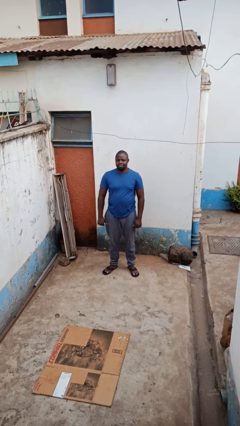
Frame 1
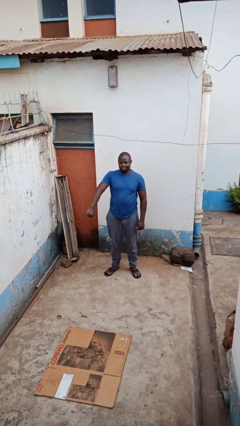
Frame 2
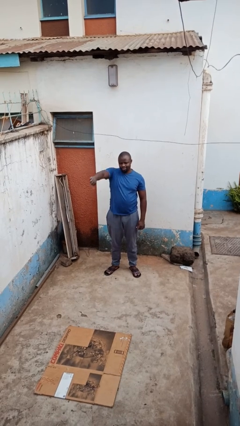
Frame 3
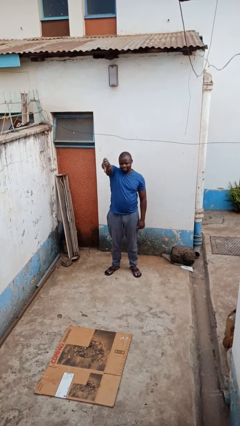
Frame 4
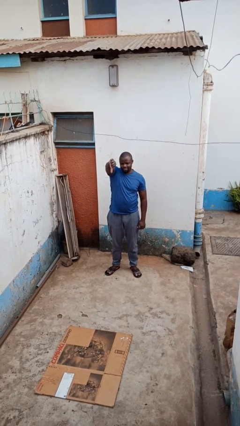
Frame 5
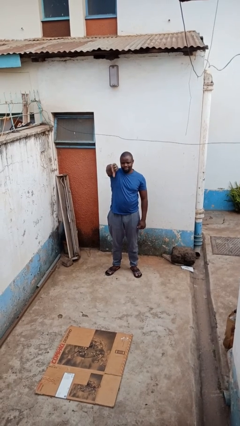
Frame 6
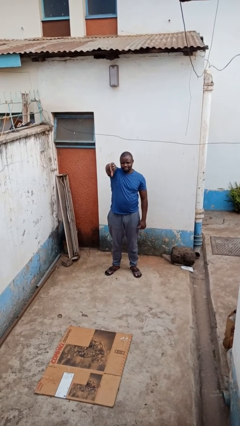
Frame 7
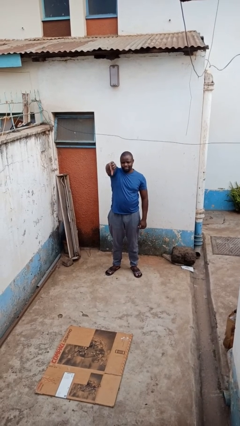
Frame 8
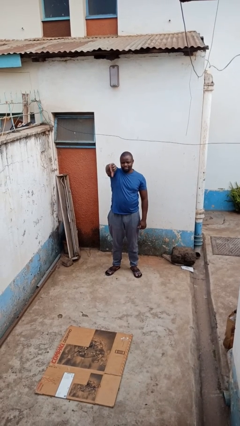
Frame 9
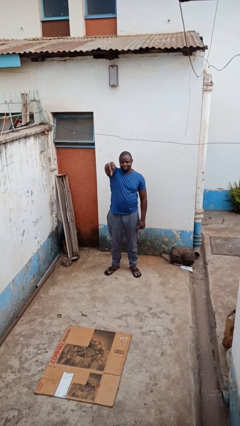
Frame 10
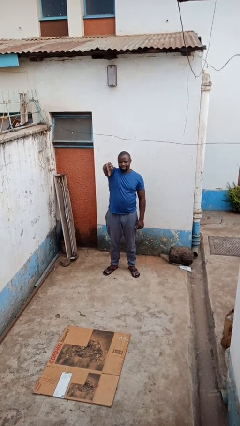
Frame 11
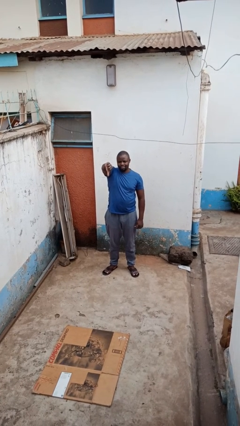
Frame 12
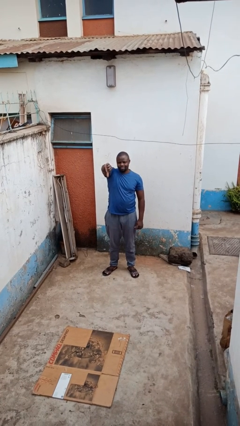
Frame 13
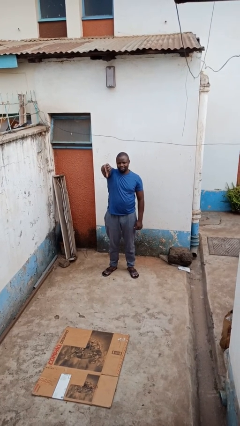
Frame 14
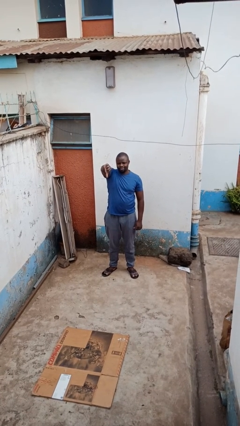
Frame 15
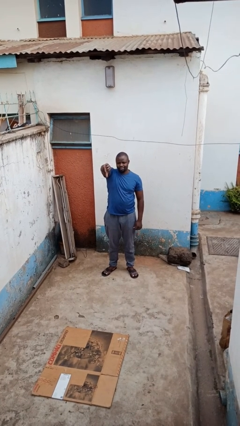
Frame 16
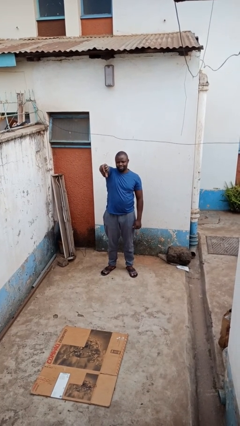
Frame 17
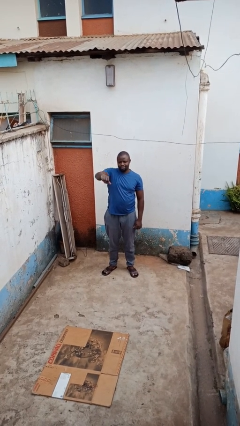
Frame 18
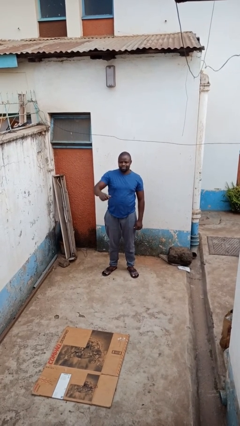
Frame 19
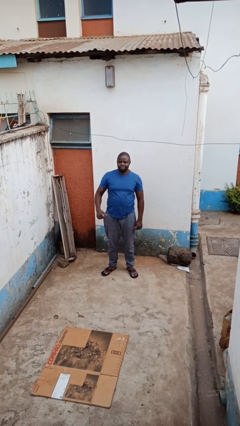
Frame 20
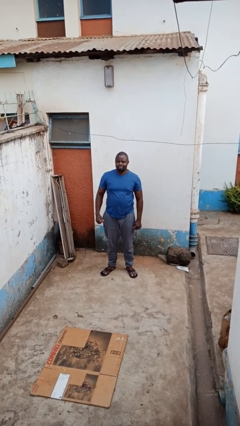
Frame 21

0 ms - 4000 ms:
person gestures thumbs down

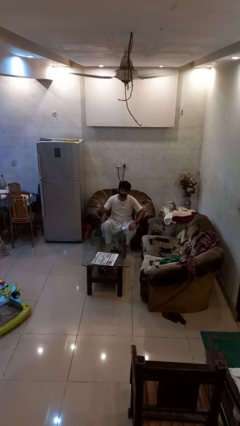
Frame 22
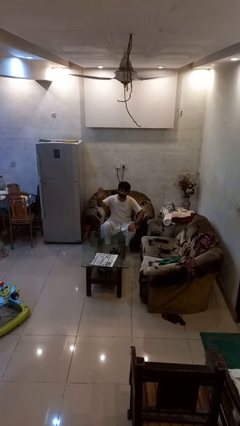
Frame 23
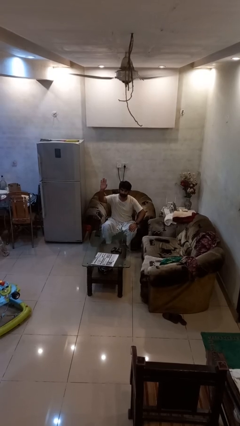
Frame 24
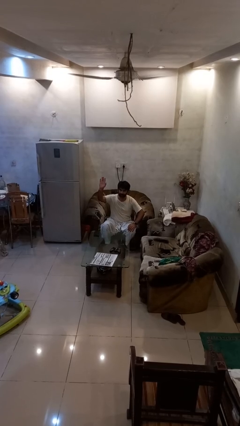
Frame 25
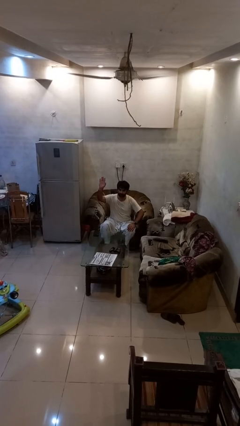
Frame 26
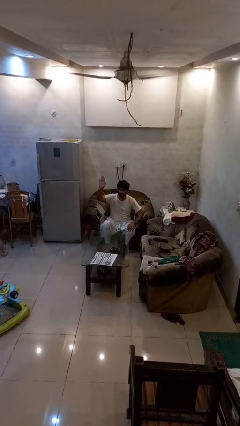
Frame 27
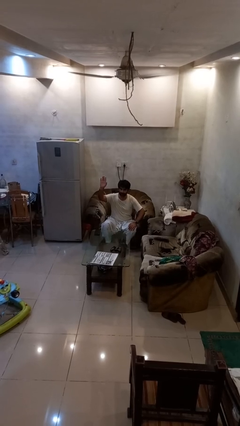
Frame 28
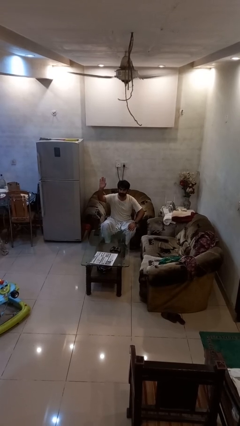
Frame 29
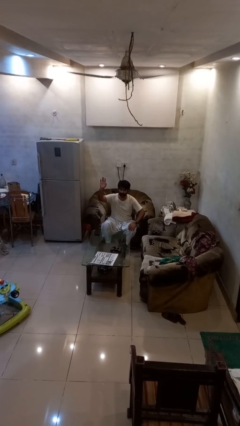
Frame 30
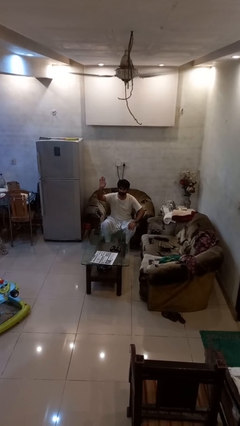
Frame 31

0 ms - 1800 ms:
person gestures raise hand

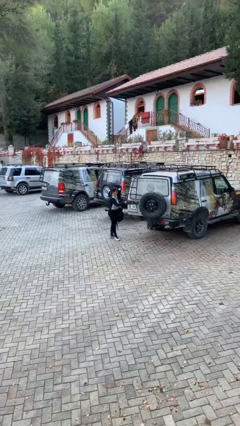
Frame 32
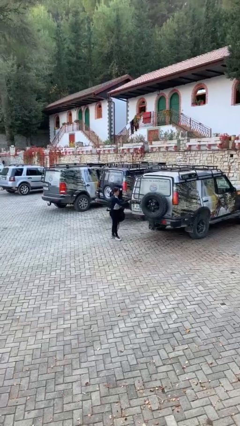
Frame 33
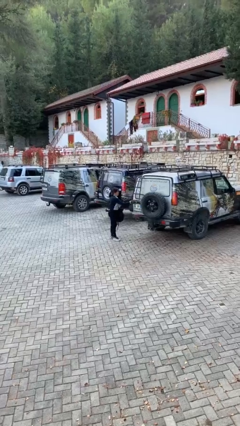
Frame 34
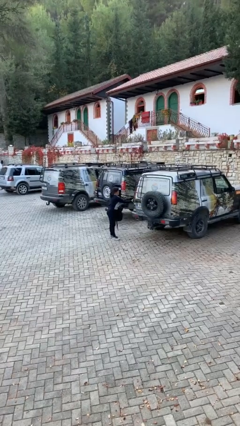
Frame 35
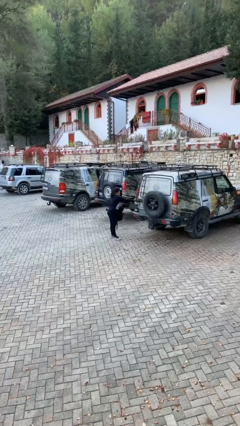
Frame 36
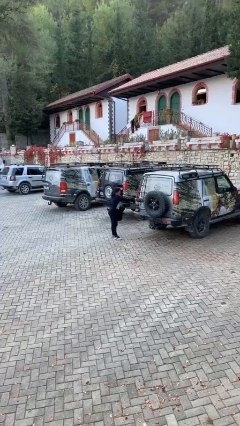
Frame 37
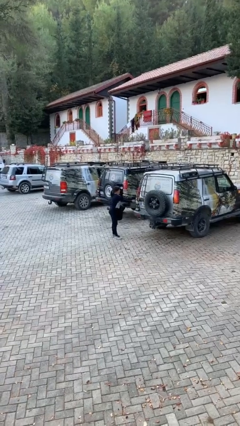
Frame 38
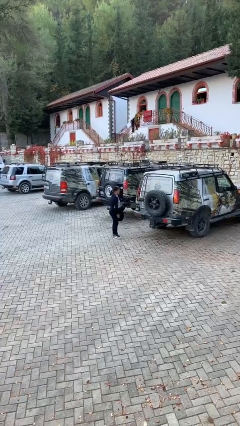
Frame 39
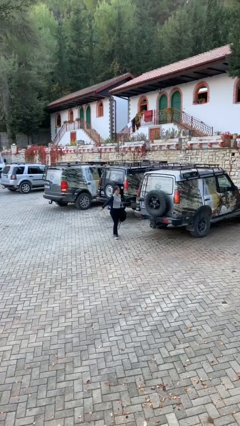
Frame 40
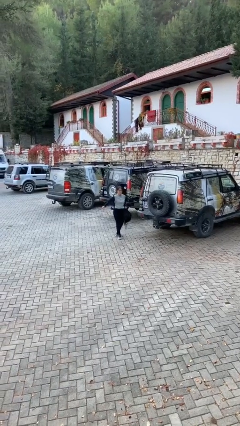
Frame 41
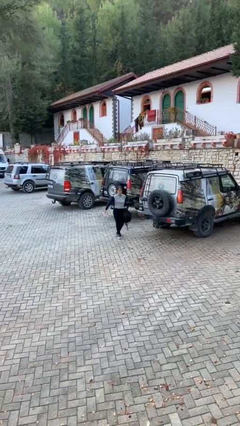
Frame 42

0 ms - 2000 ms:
person closes car trunk

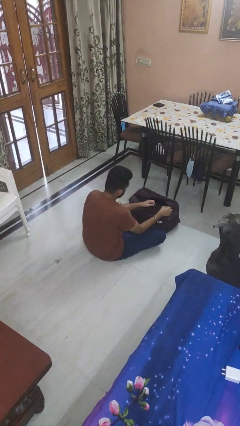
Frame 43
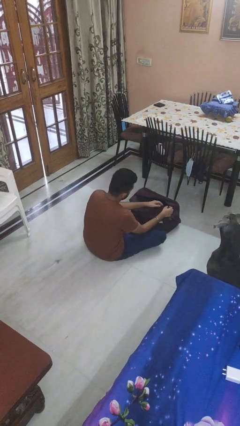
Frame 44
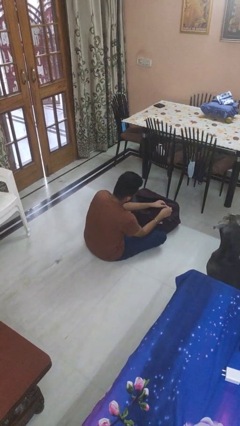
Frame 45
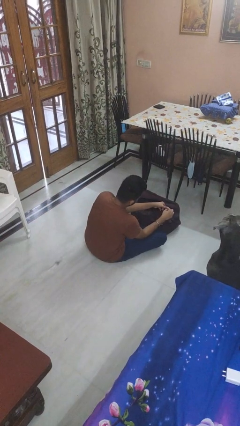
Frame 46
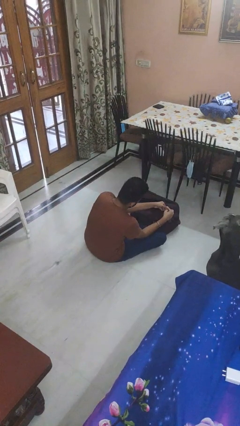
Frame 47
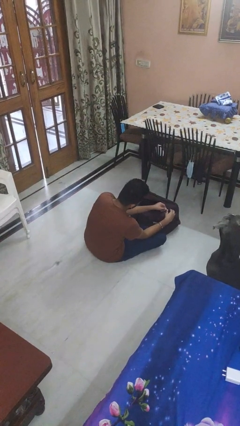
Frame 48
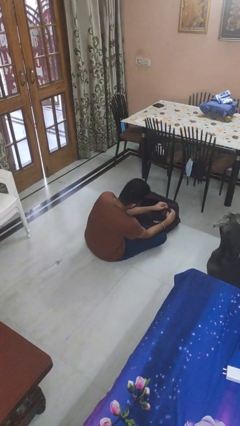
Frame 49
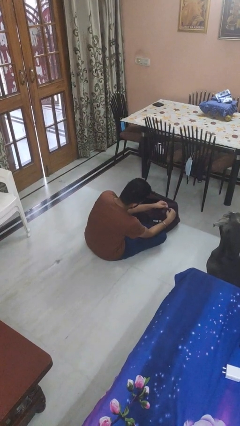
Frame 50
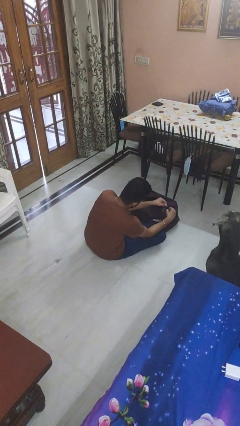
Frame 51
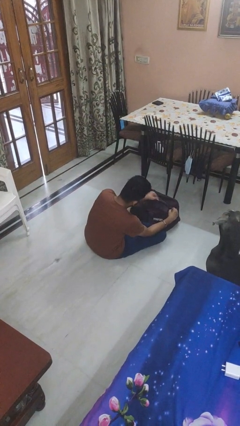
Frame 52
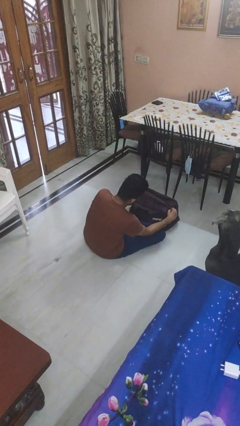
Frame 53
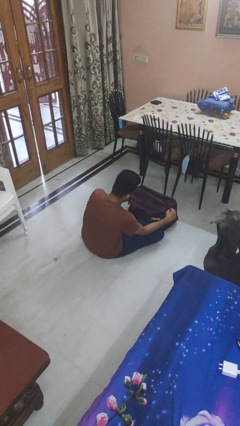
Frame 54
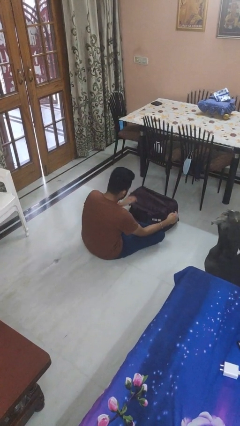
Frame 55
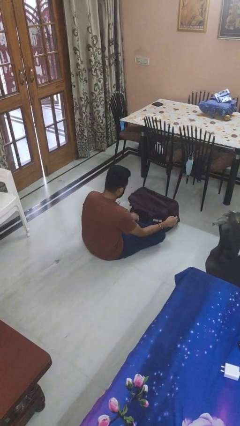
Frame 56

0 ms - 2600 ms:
person closes suitcase

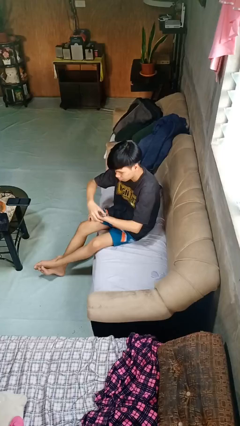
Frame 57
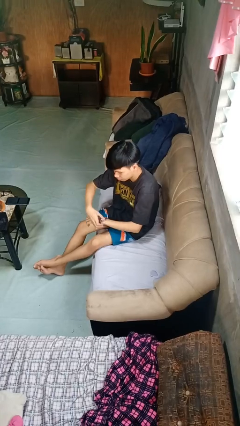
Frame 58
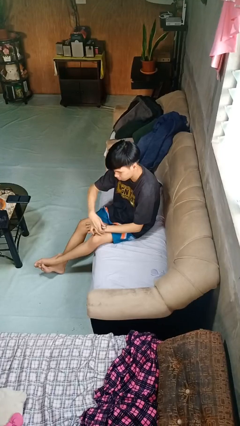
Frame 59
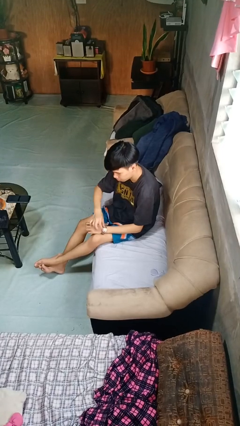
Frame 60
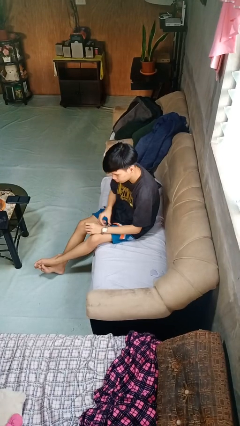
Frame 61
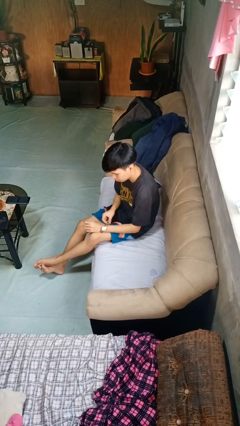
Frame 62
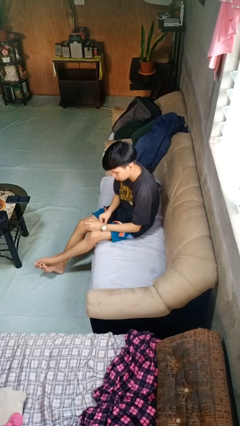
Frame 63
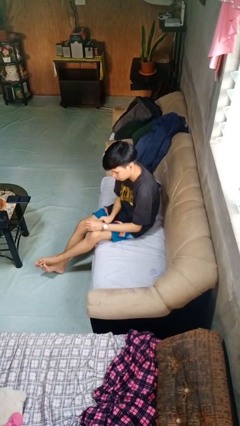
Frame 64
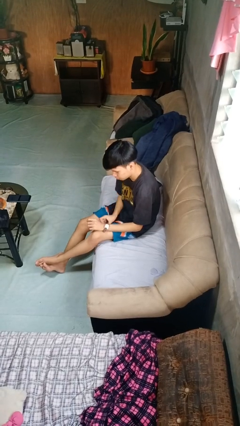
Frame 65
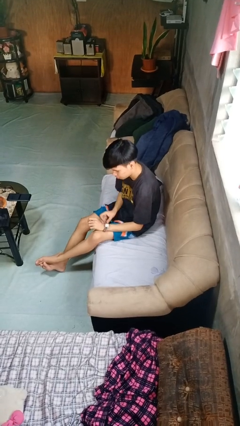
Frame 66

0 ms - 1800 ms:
person puts on wristwatch

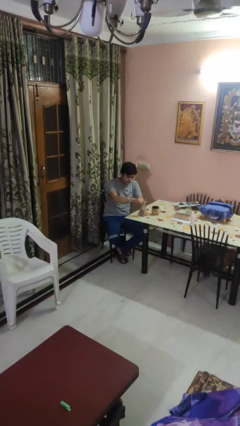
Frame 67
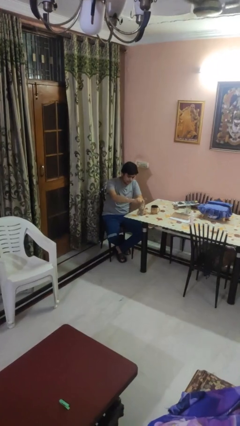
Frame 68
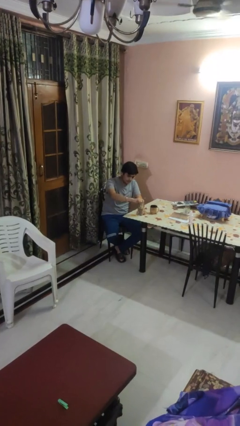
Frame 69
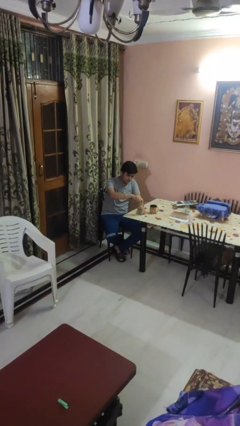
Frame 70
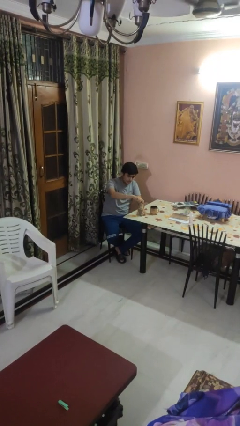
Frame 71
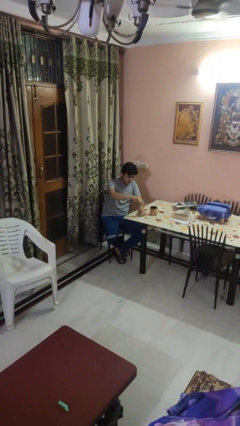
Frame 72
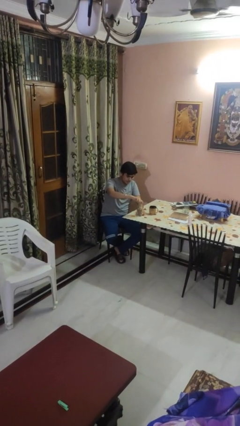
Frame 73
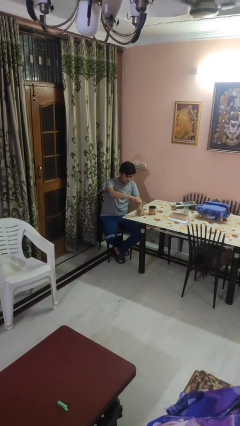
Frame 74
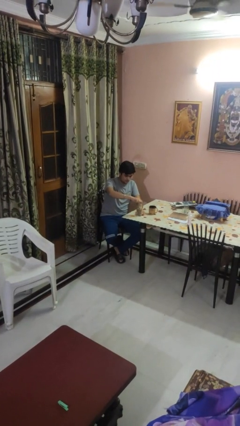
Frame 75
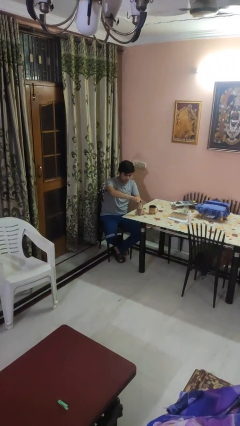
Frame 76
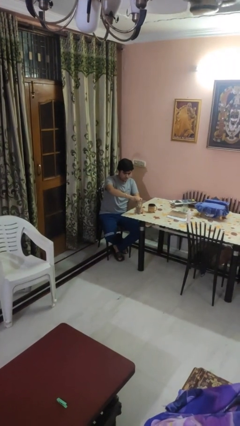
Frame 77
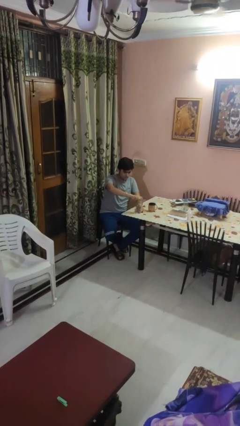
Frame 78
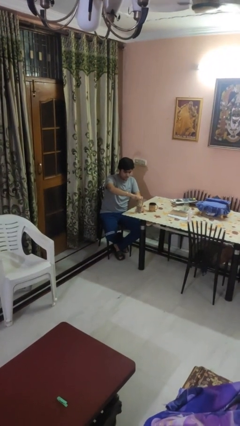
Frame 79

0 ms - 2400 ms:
person unscrews lid from bottle

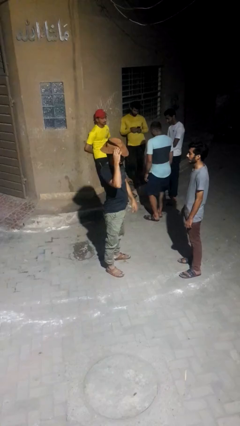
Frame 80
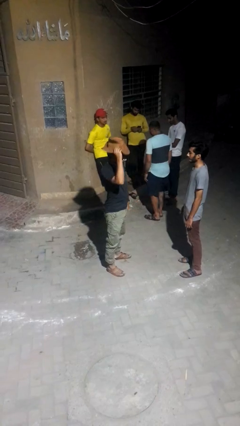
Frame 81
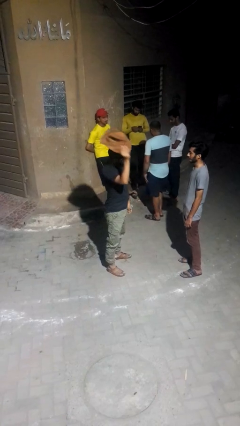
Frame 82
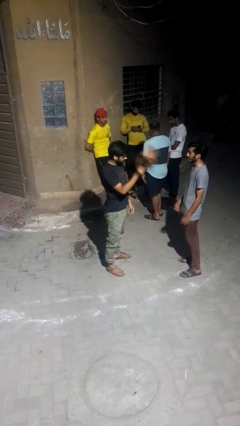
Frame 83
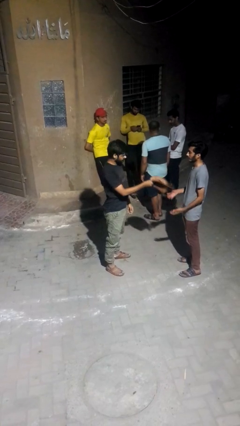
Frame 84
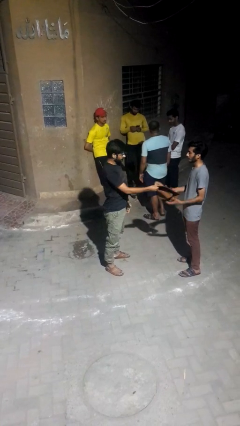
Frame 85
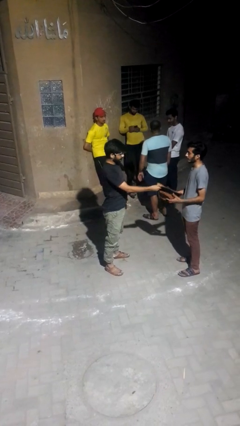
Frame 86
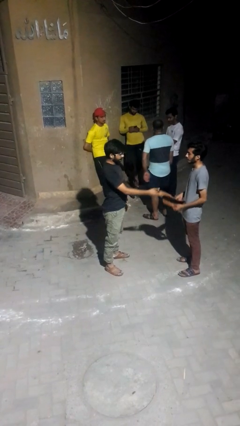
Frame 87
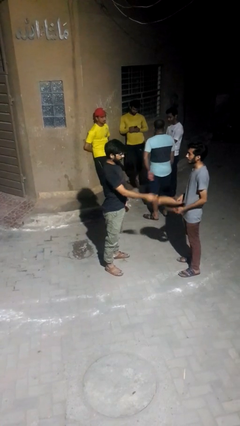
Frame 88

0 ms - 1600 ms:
person transfers object to person

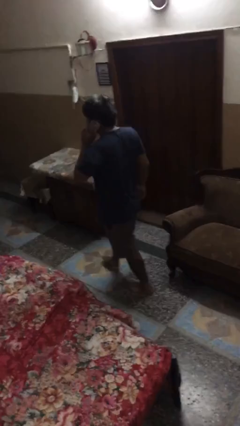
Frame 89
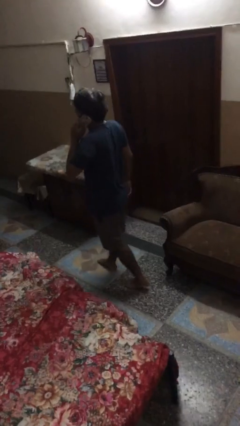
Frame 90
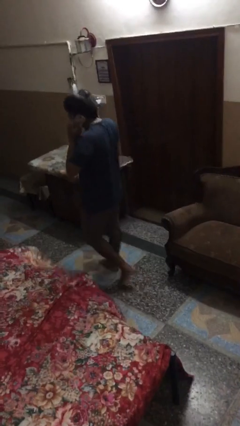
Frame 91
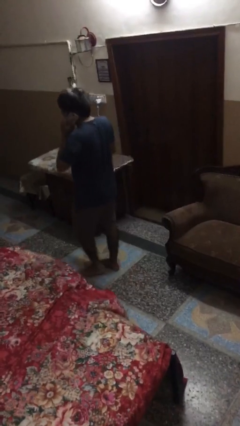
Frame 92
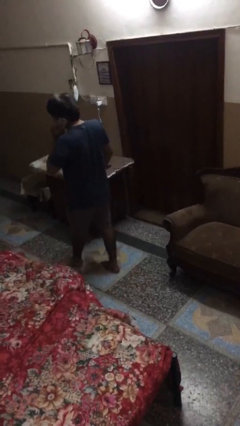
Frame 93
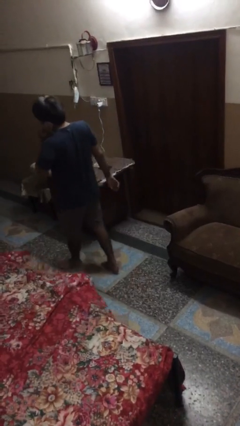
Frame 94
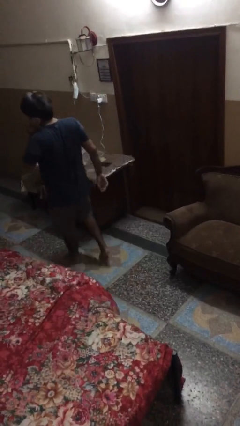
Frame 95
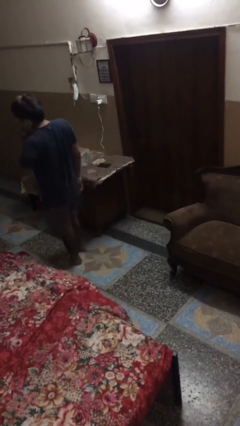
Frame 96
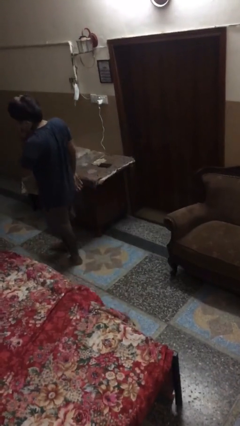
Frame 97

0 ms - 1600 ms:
person talks on phone
